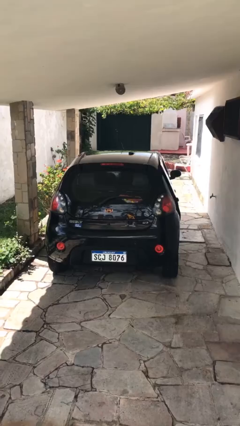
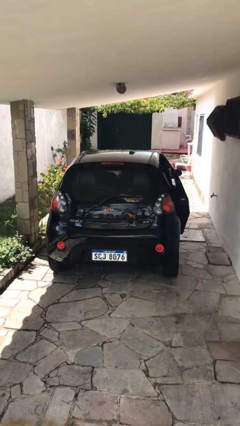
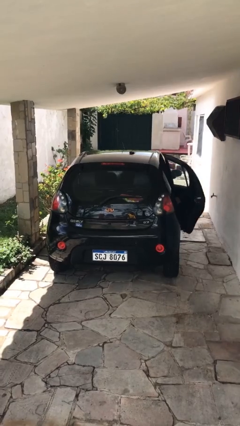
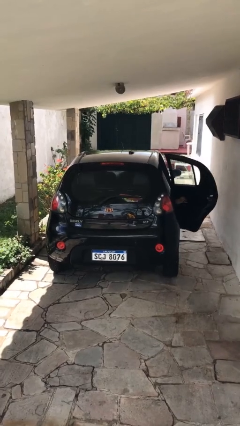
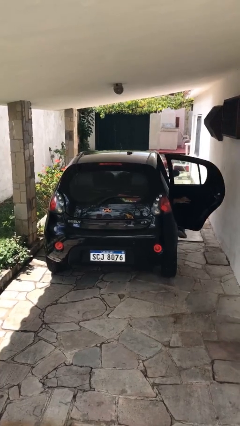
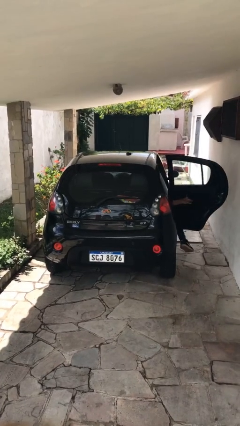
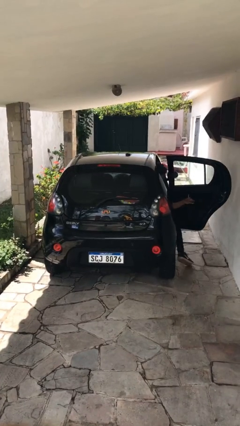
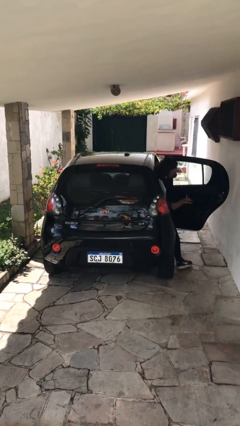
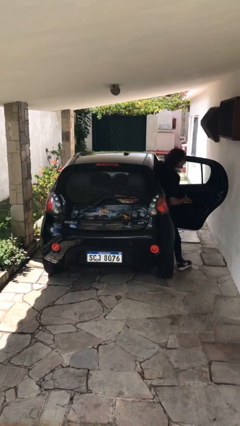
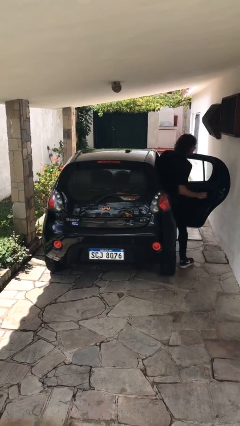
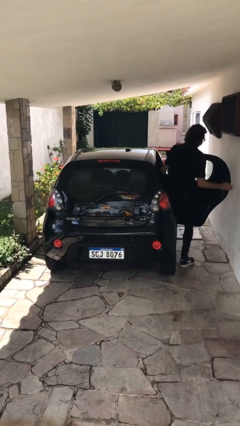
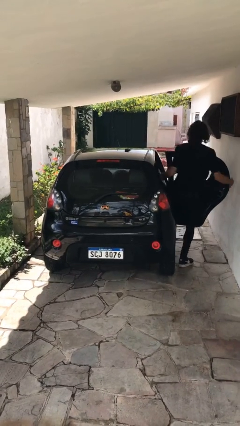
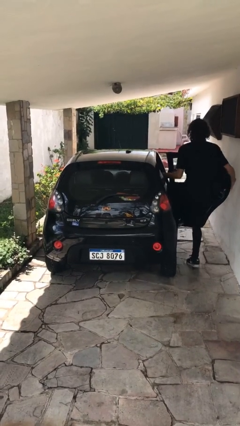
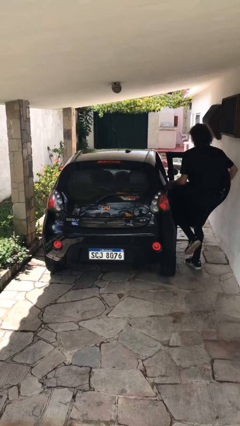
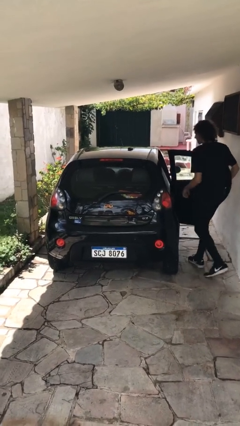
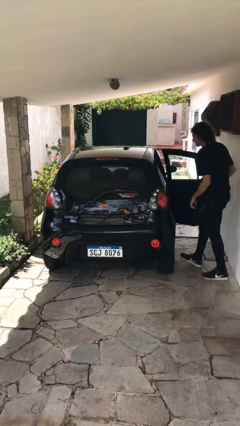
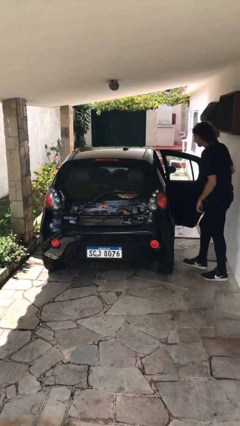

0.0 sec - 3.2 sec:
car drops off person

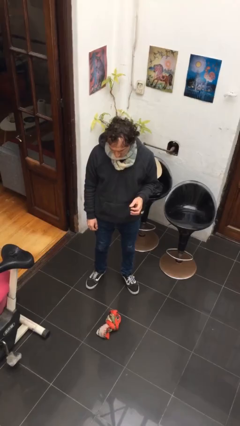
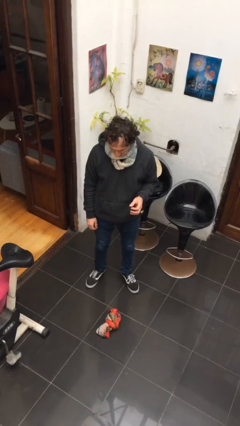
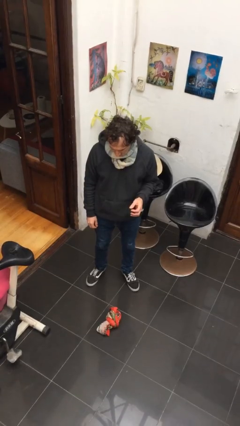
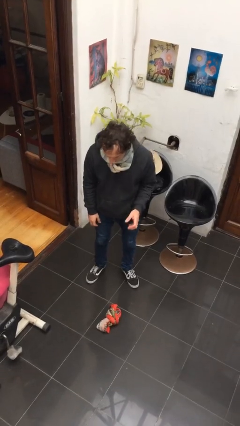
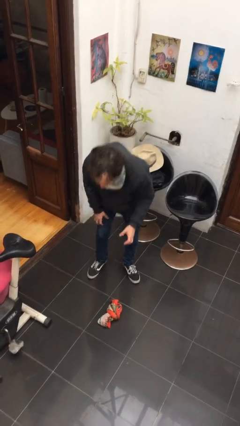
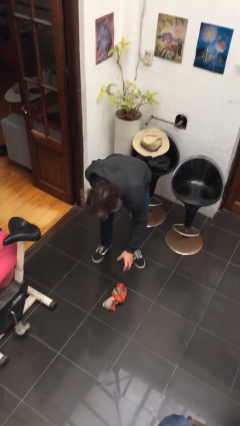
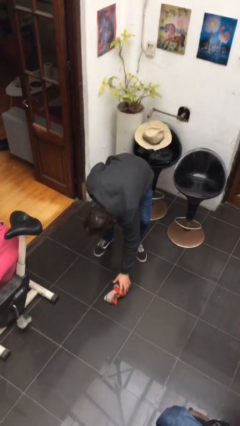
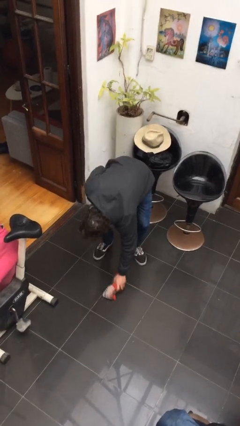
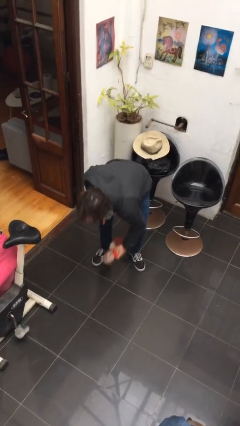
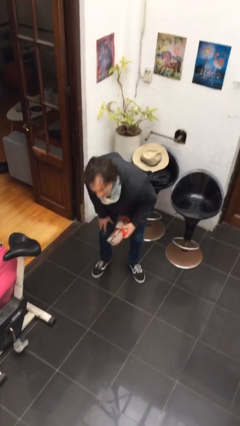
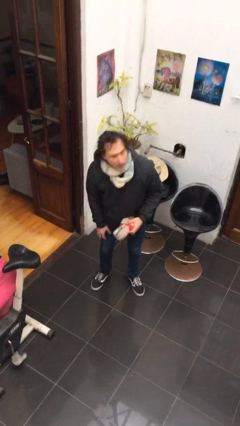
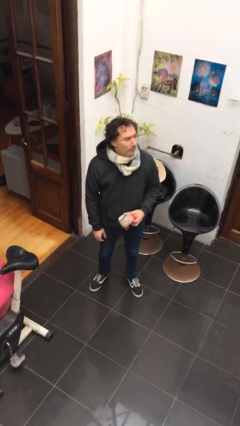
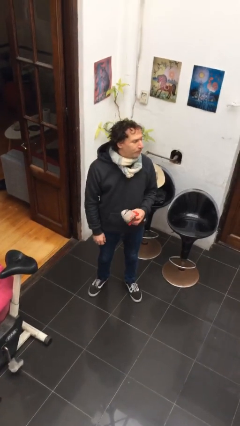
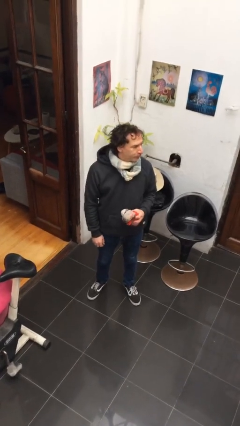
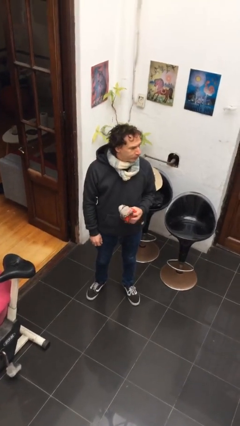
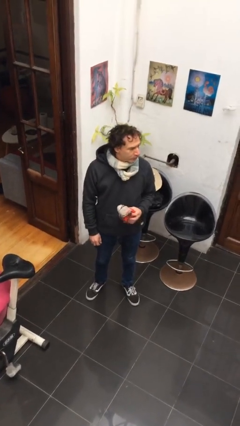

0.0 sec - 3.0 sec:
person picks up object from floor

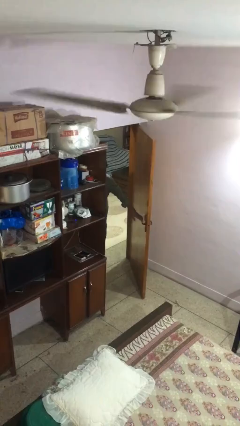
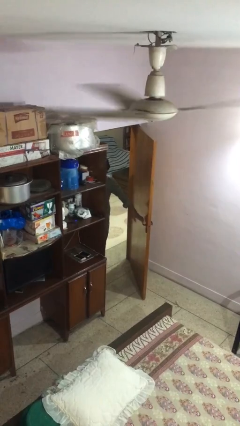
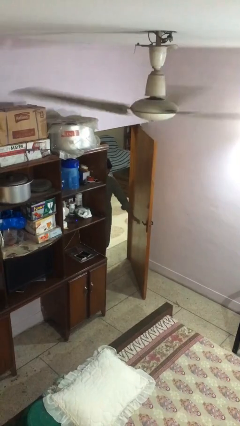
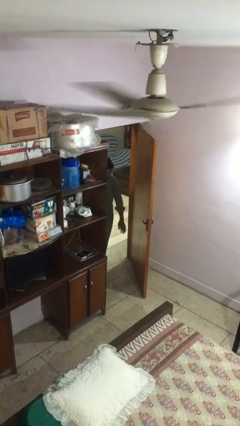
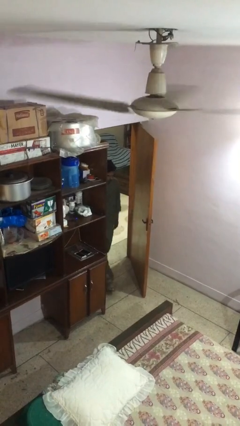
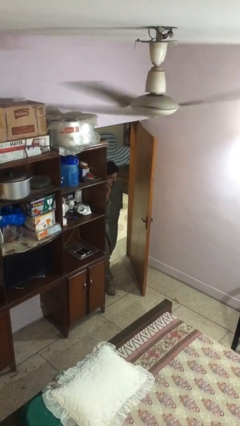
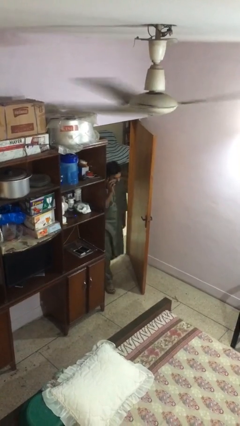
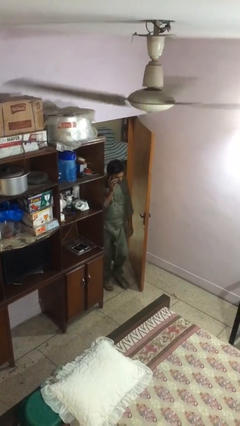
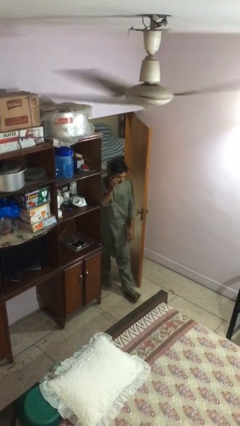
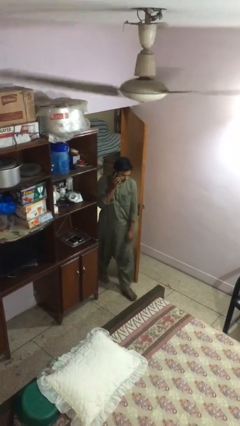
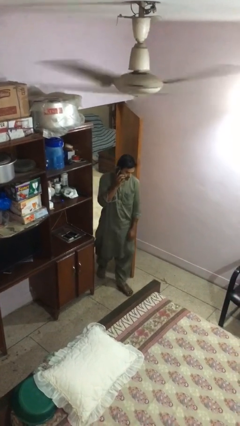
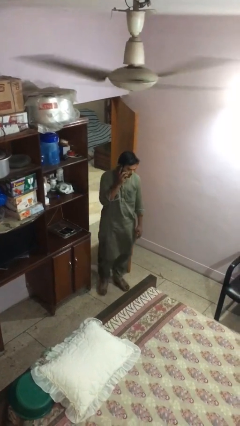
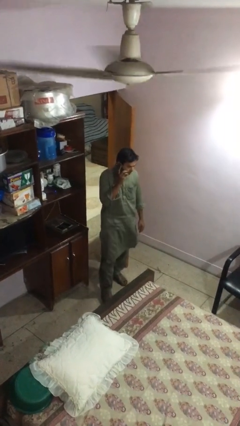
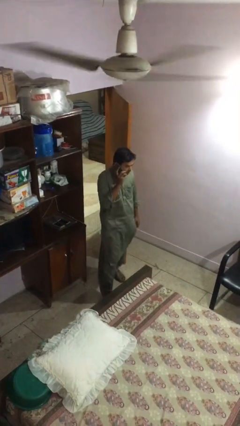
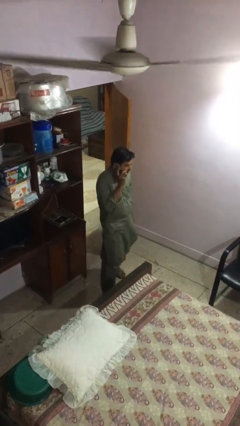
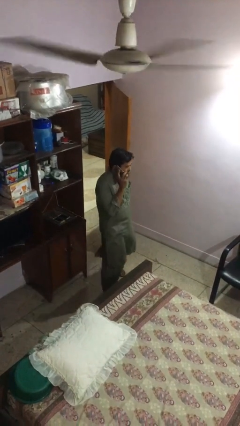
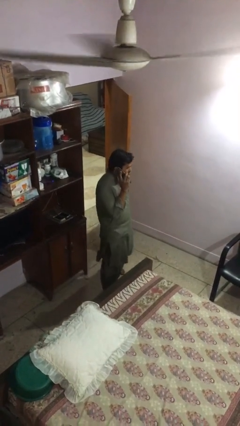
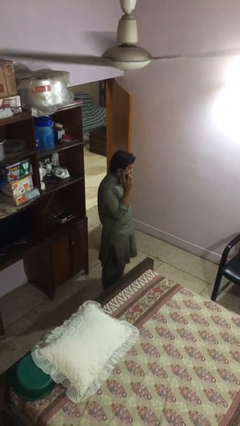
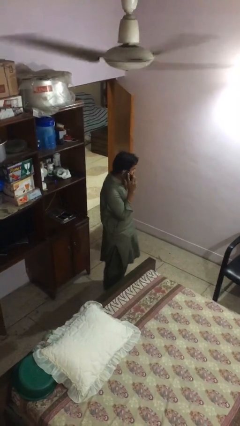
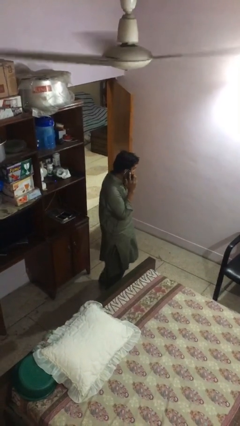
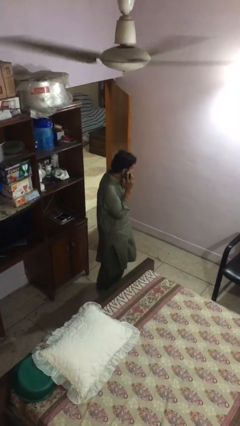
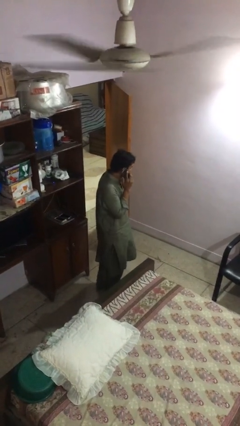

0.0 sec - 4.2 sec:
person enters scene through structure

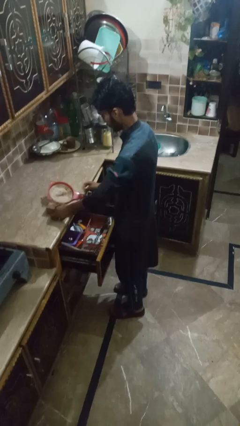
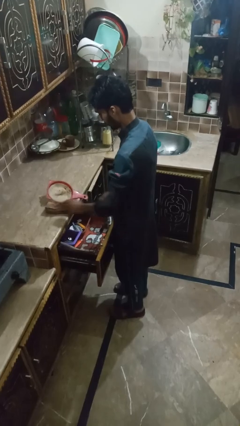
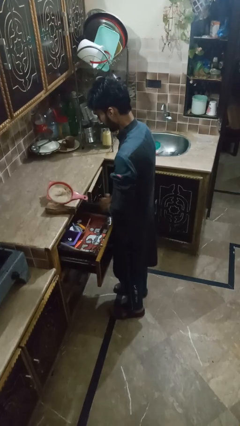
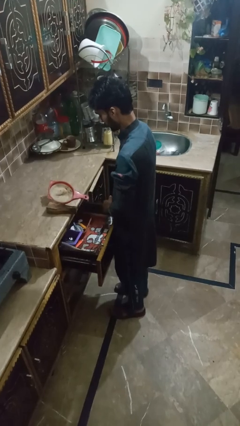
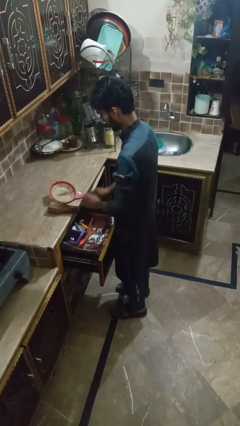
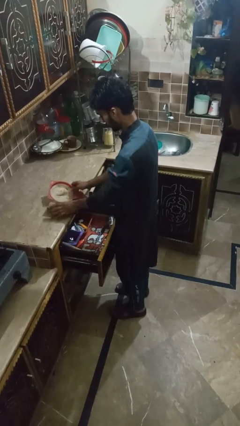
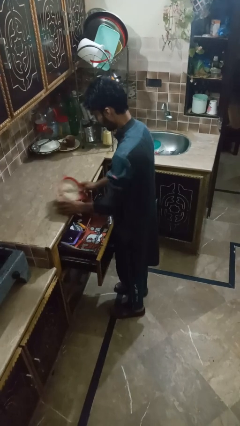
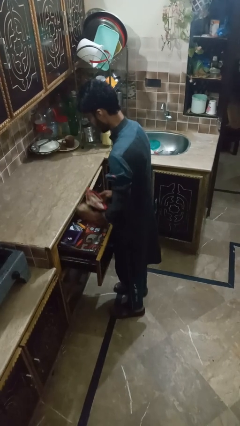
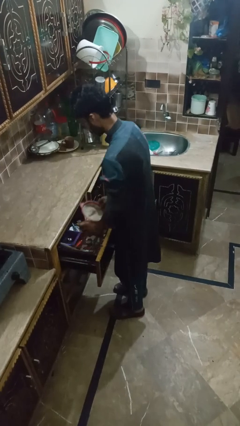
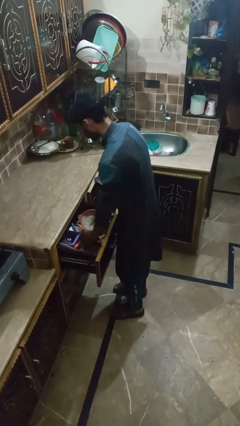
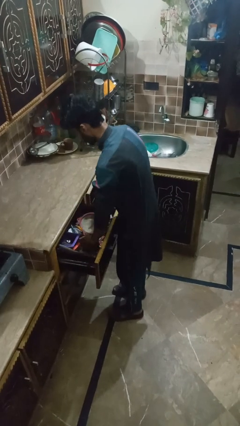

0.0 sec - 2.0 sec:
person puts object into kitchen drawer

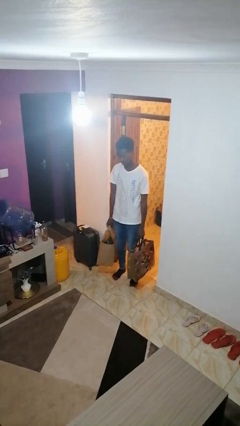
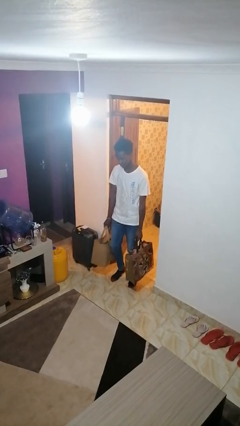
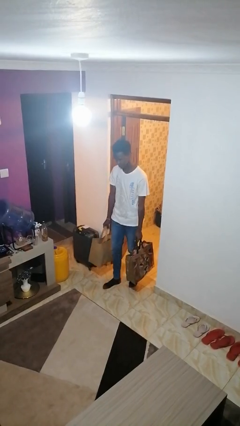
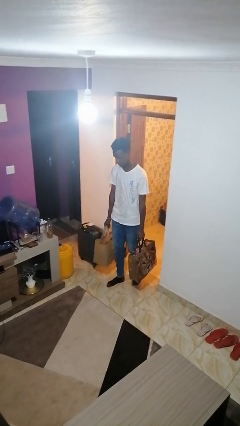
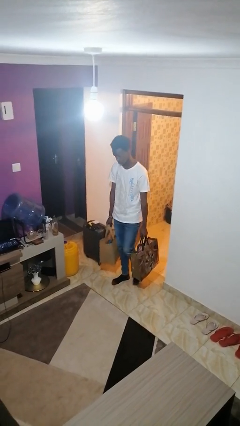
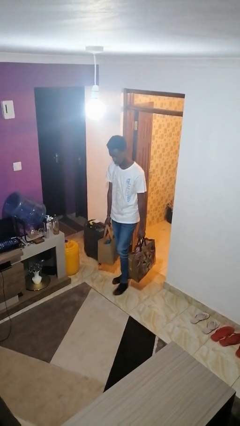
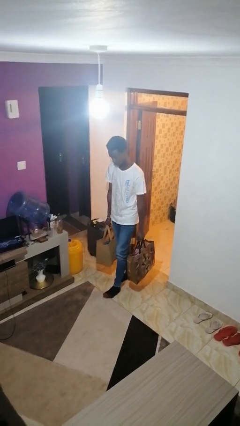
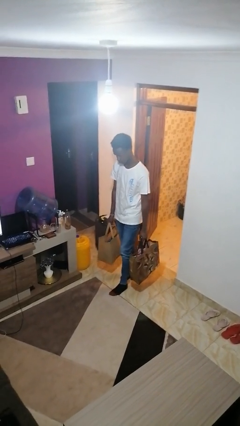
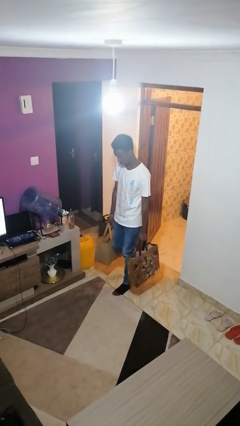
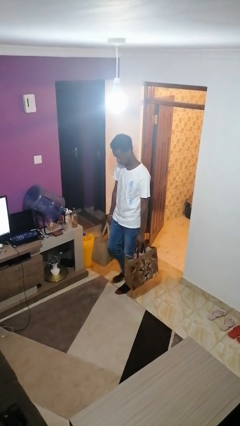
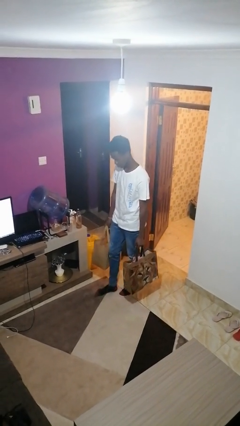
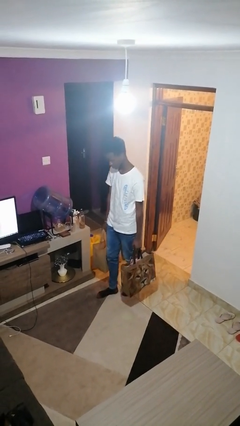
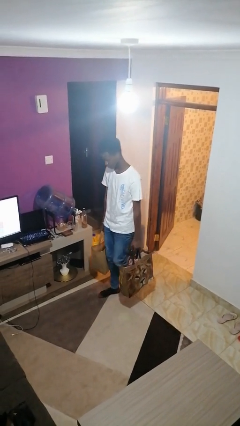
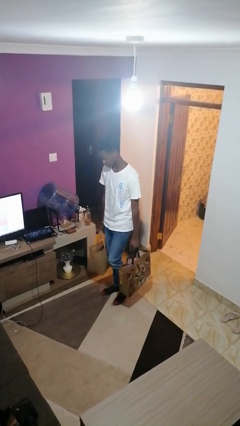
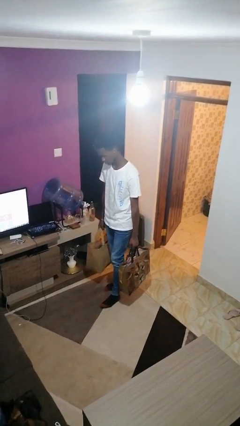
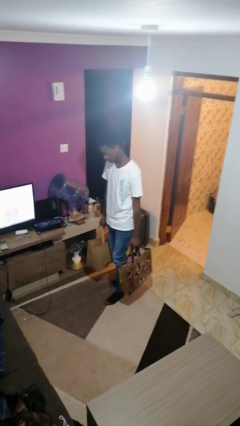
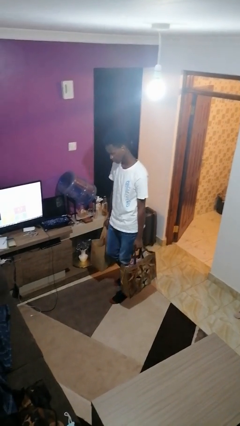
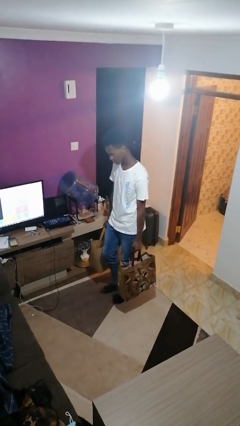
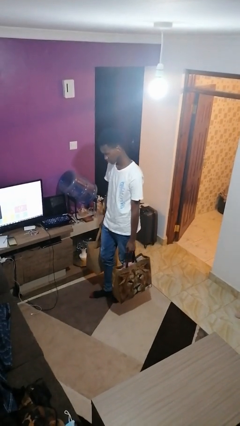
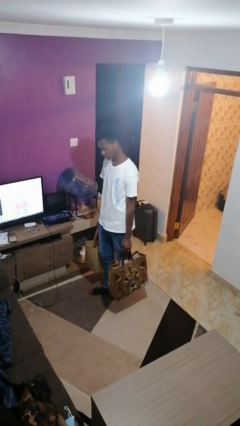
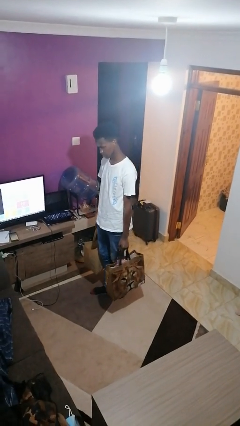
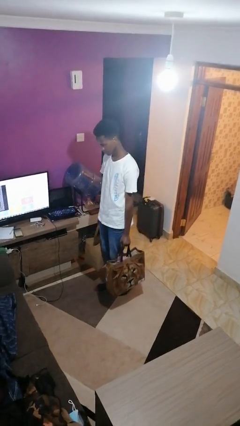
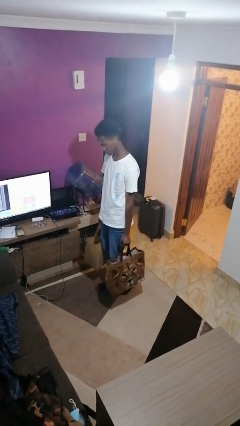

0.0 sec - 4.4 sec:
person carries groceries

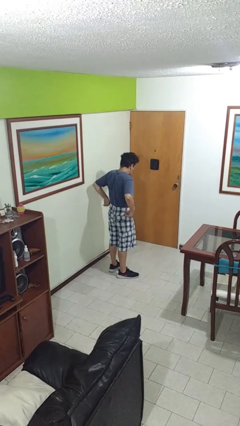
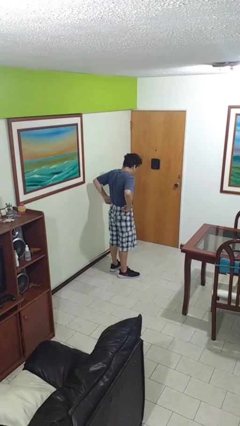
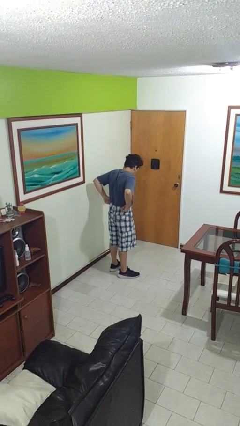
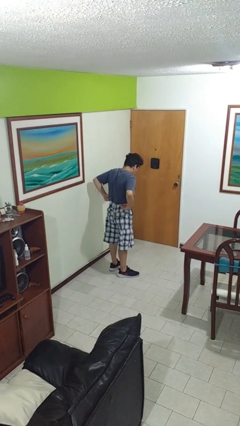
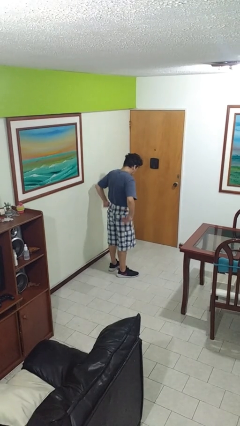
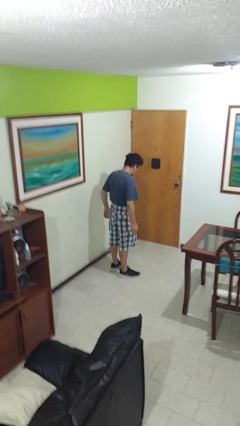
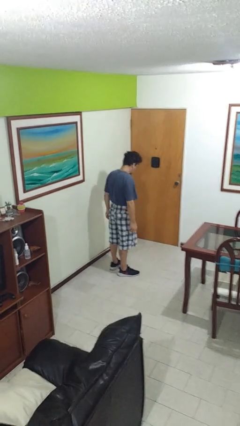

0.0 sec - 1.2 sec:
person hikes up pants
